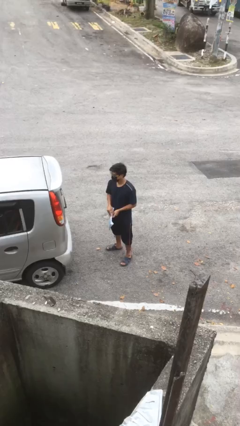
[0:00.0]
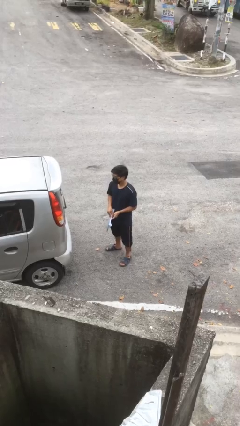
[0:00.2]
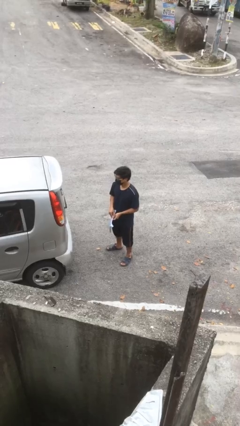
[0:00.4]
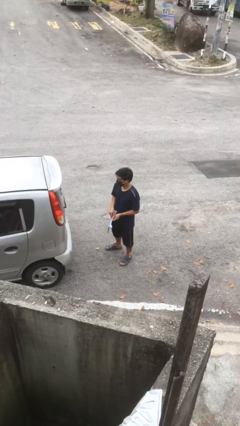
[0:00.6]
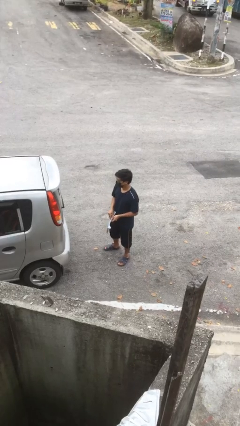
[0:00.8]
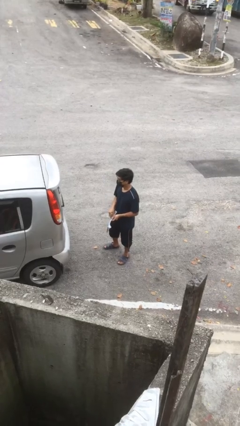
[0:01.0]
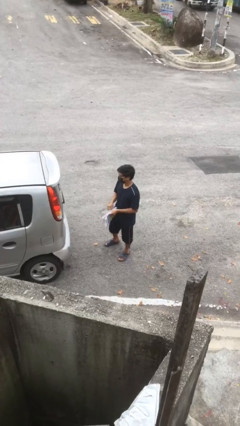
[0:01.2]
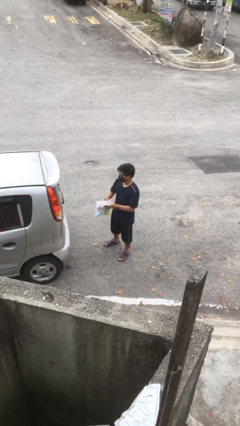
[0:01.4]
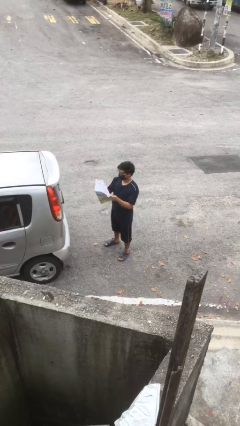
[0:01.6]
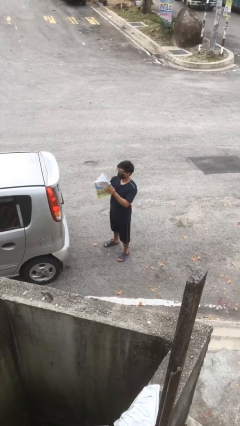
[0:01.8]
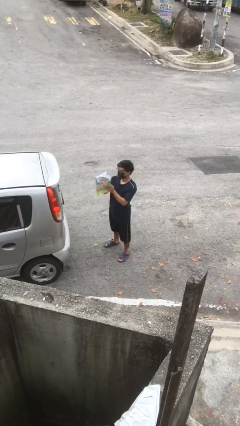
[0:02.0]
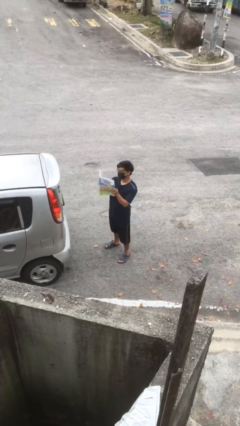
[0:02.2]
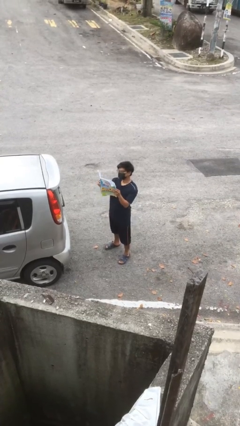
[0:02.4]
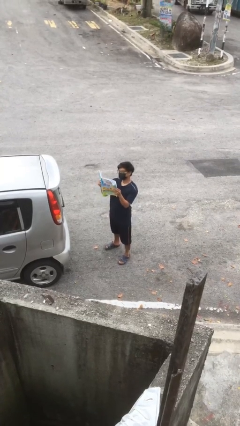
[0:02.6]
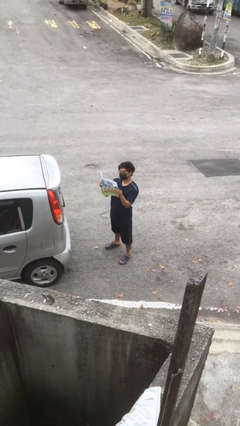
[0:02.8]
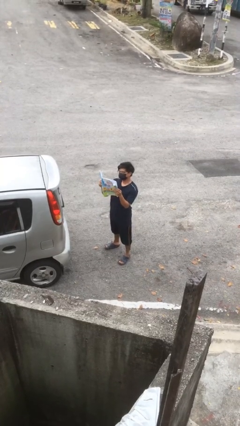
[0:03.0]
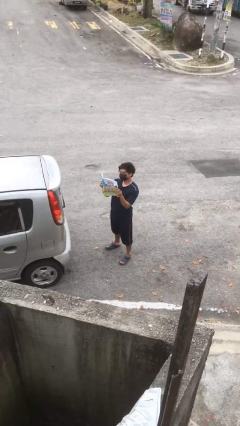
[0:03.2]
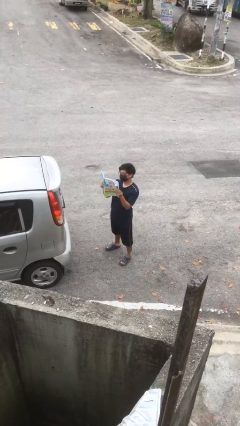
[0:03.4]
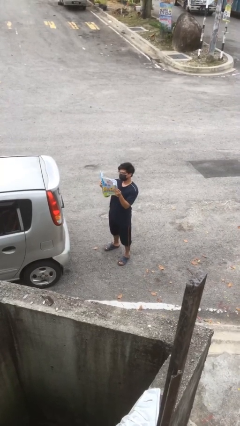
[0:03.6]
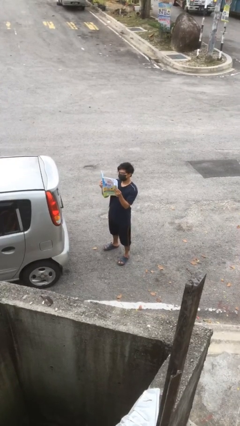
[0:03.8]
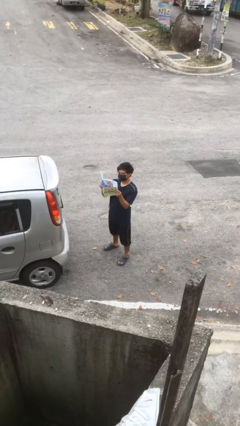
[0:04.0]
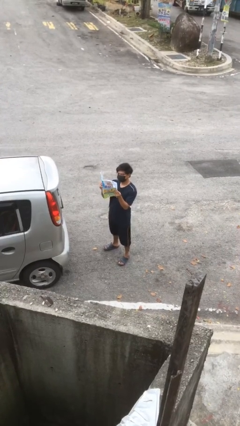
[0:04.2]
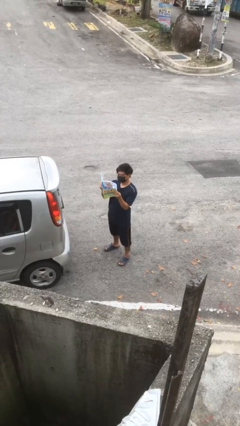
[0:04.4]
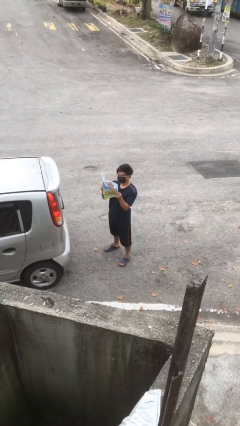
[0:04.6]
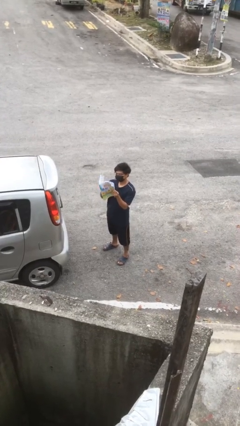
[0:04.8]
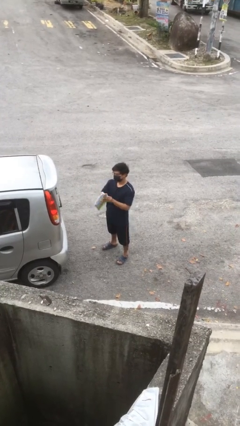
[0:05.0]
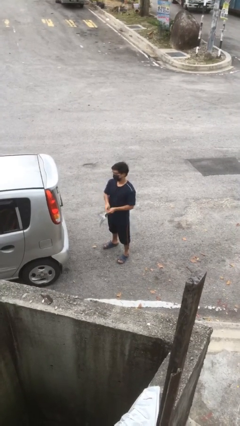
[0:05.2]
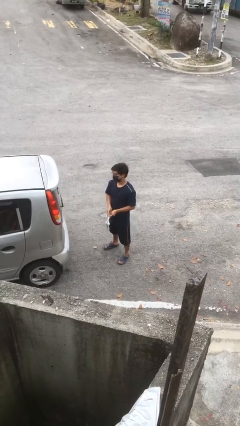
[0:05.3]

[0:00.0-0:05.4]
person reads document

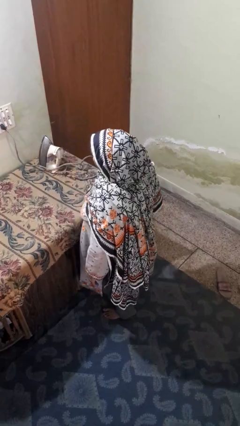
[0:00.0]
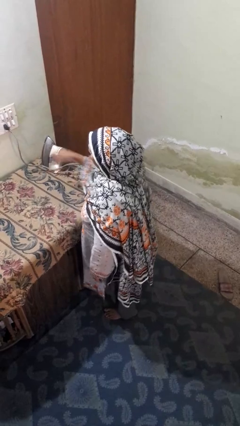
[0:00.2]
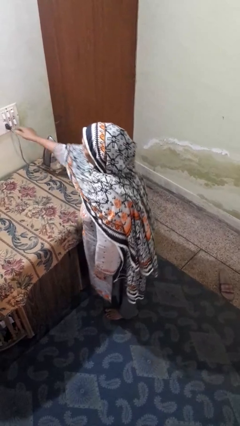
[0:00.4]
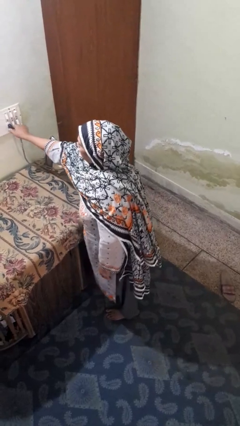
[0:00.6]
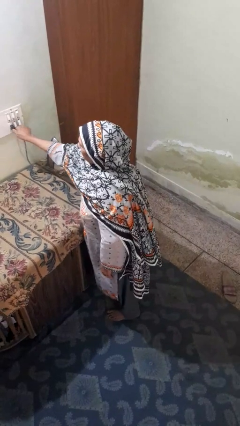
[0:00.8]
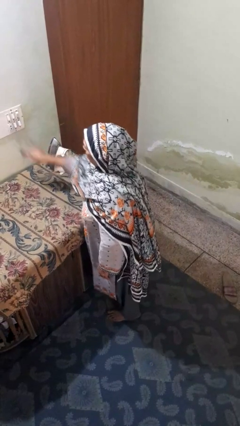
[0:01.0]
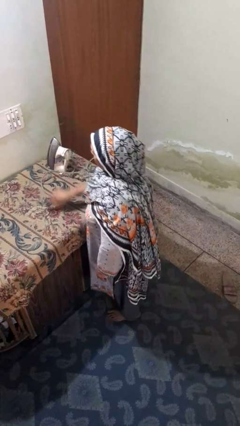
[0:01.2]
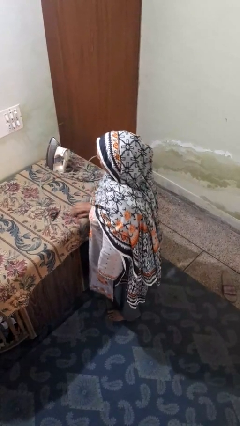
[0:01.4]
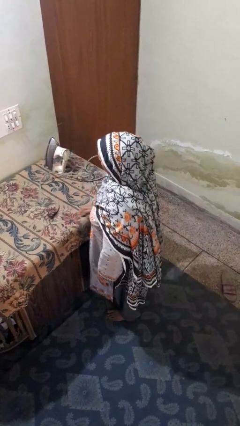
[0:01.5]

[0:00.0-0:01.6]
person unplugs from electrical socket

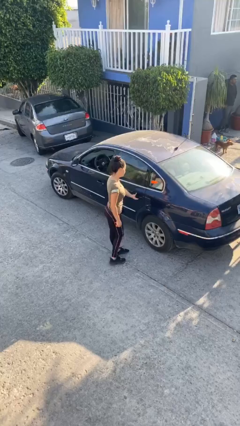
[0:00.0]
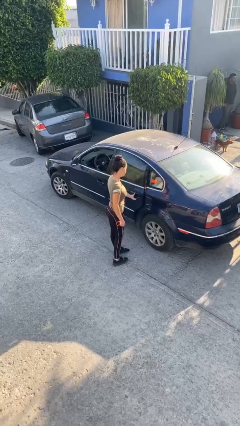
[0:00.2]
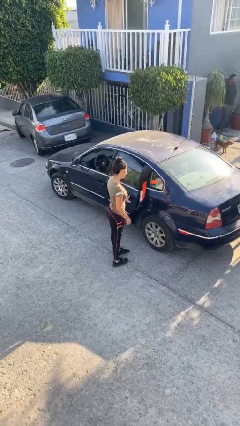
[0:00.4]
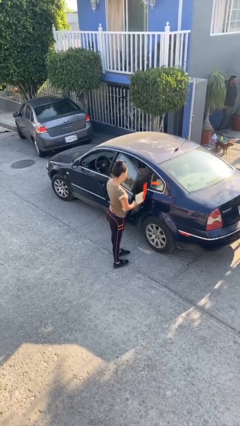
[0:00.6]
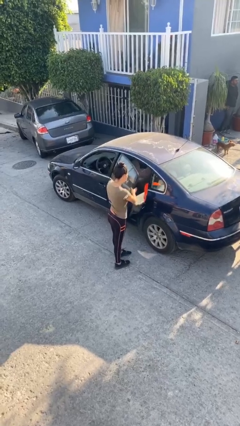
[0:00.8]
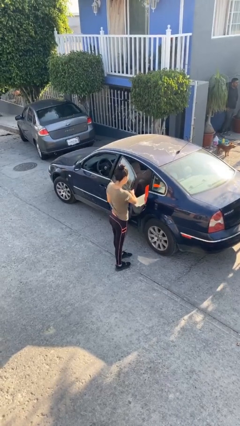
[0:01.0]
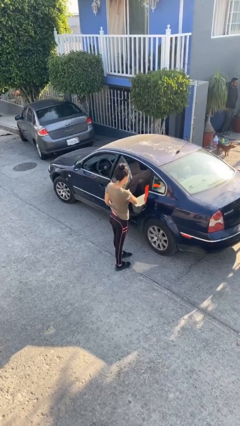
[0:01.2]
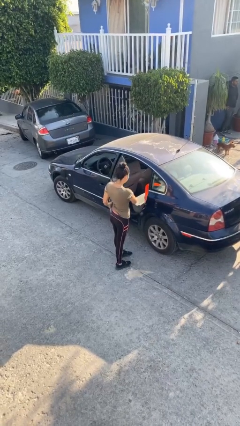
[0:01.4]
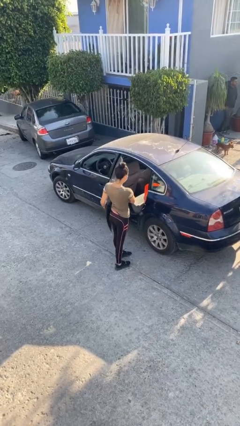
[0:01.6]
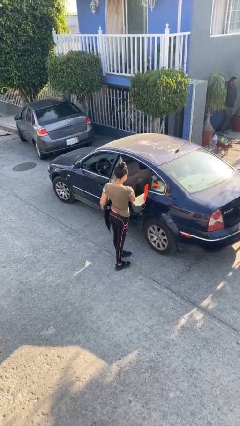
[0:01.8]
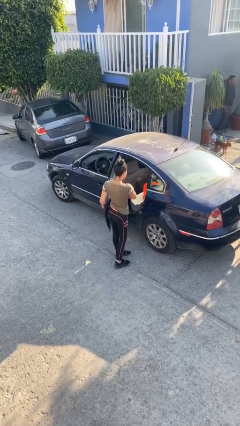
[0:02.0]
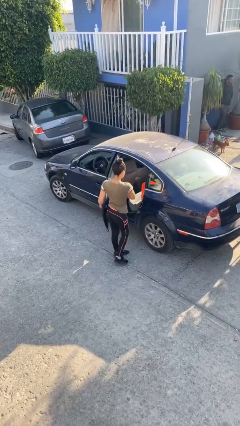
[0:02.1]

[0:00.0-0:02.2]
person opens car door

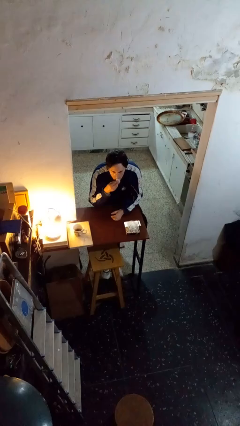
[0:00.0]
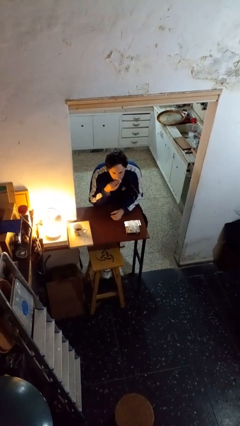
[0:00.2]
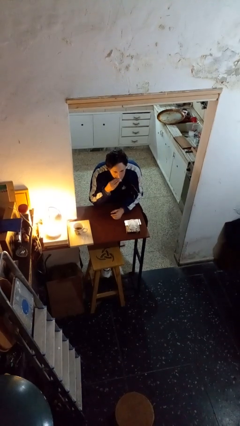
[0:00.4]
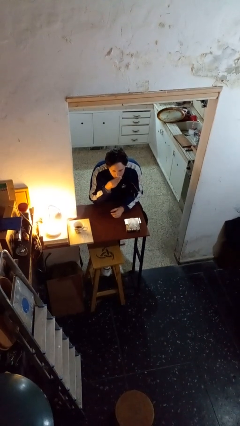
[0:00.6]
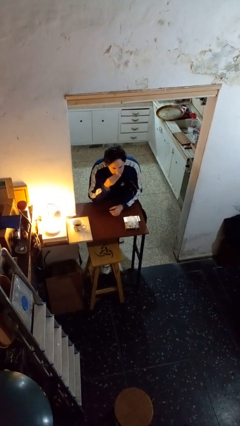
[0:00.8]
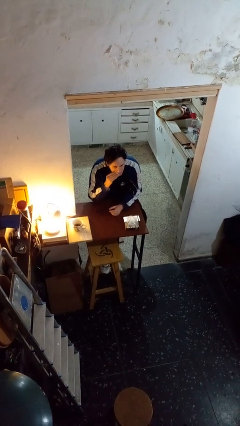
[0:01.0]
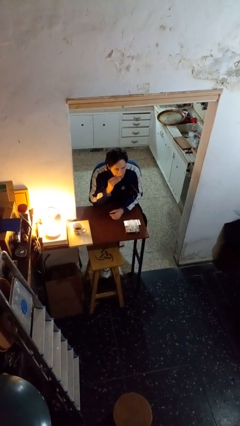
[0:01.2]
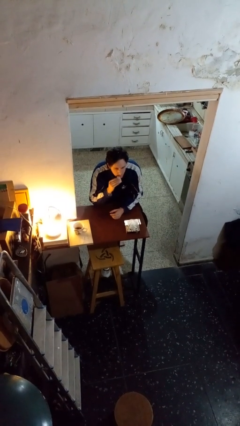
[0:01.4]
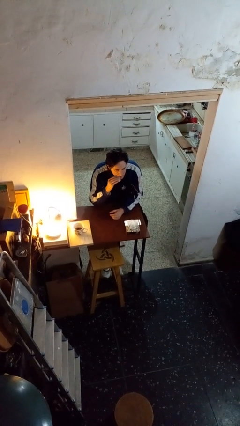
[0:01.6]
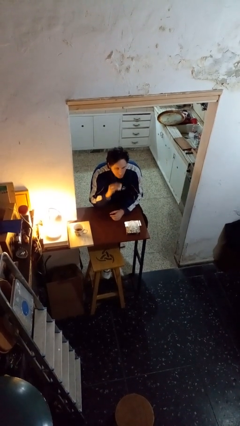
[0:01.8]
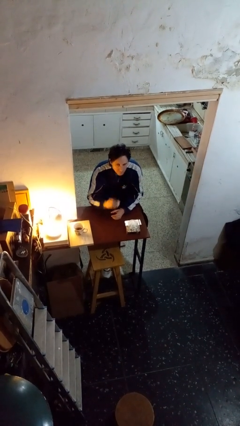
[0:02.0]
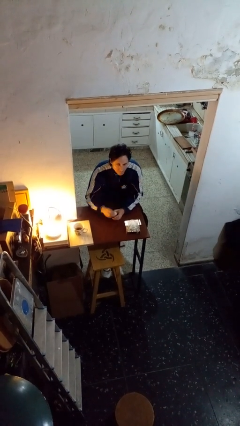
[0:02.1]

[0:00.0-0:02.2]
person wipes mouth with napkin

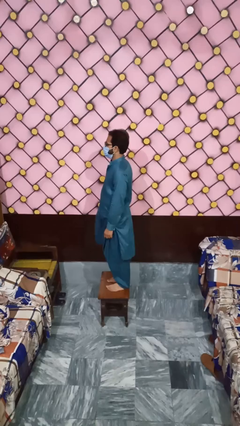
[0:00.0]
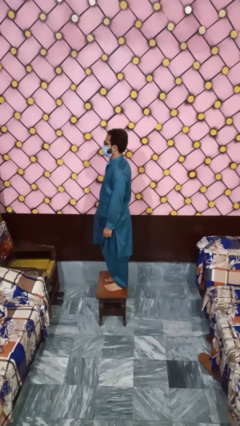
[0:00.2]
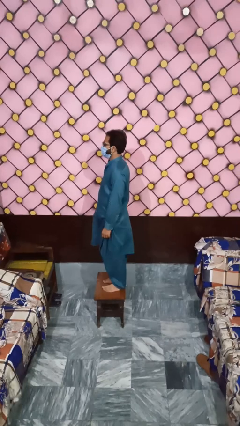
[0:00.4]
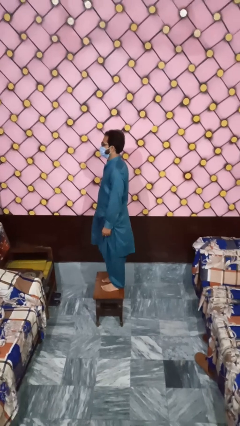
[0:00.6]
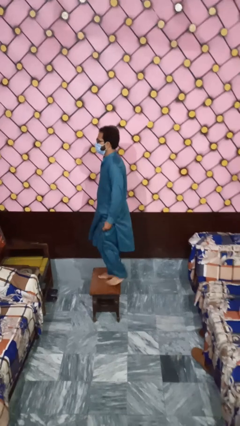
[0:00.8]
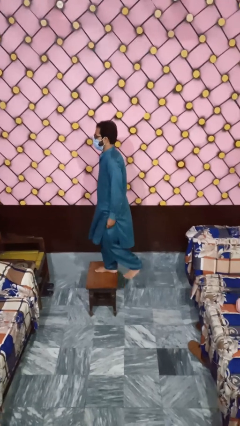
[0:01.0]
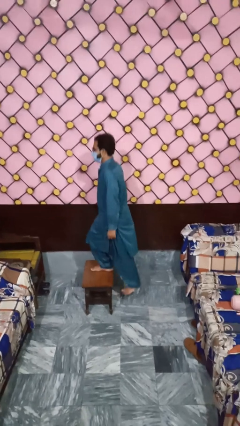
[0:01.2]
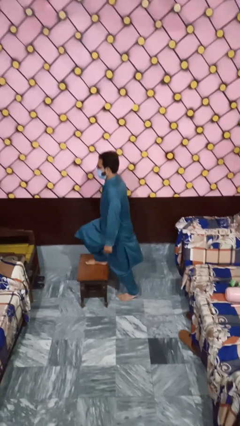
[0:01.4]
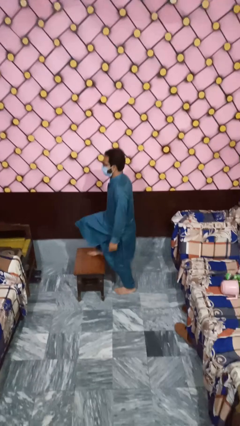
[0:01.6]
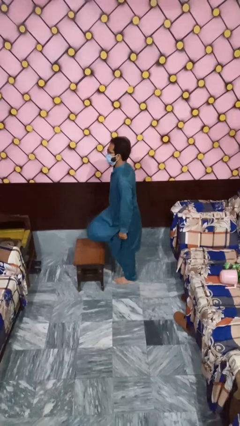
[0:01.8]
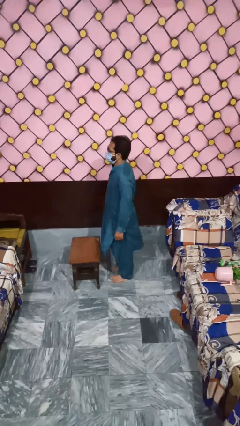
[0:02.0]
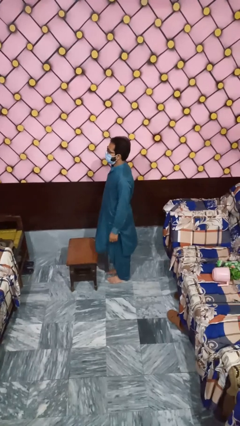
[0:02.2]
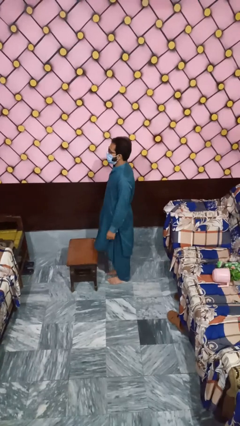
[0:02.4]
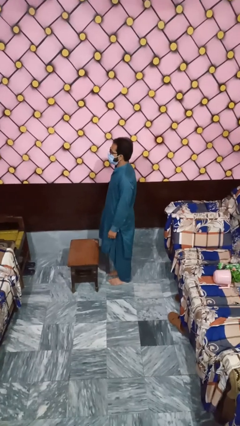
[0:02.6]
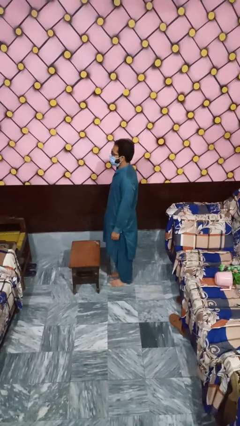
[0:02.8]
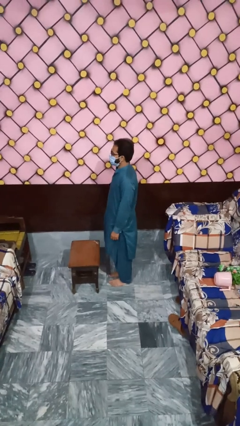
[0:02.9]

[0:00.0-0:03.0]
person climbs off table

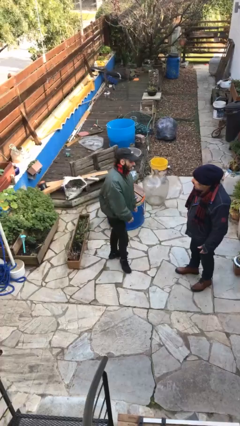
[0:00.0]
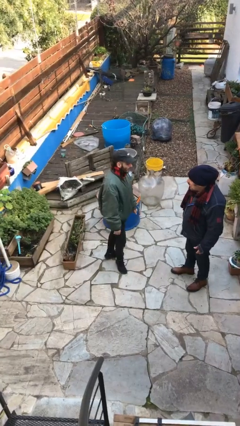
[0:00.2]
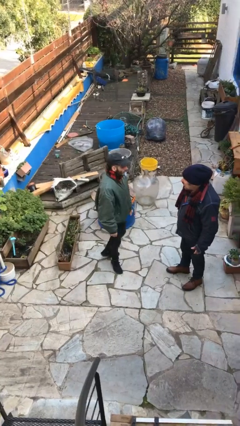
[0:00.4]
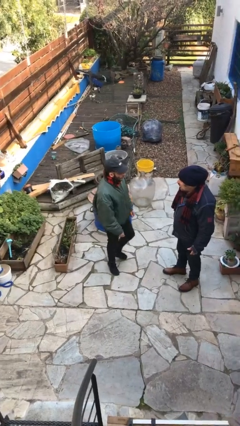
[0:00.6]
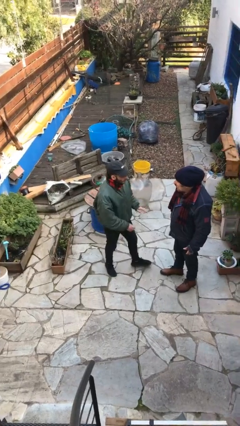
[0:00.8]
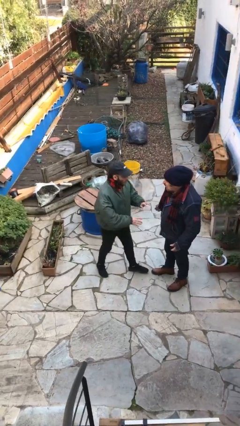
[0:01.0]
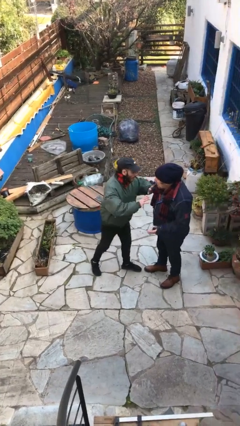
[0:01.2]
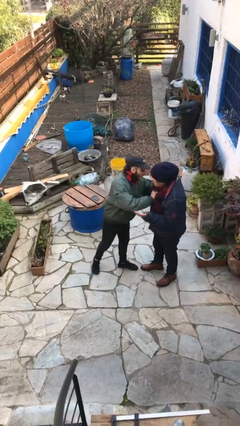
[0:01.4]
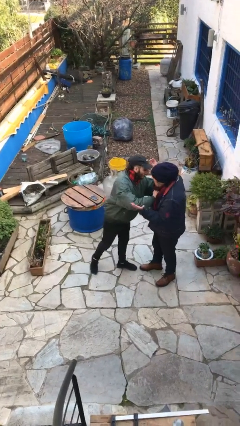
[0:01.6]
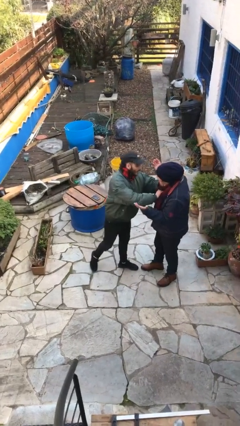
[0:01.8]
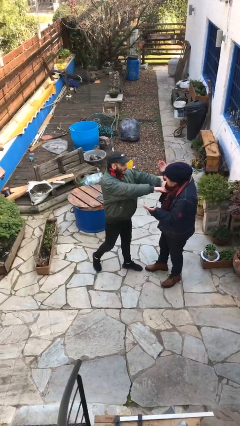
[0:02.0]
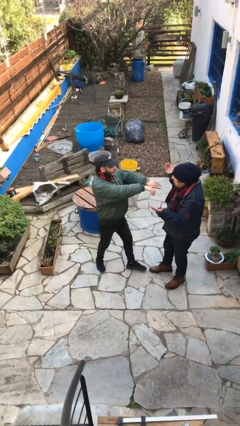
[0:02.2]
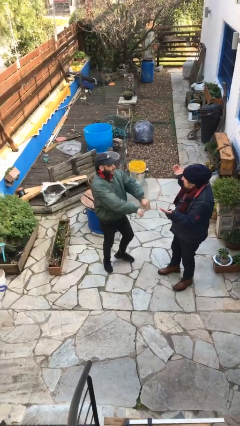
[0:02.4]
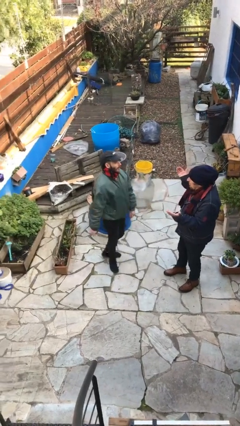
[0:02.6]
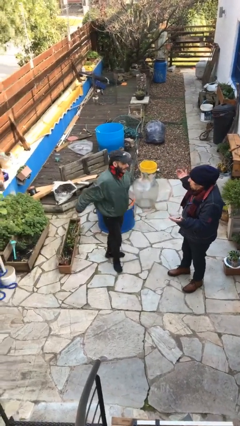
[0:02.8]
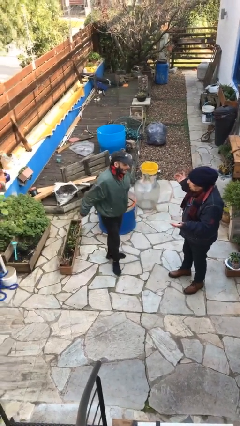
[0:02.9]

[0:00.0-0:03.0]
person shoves person

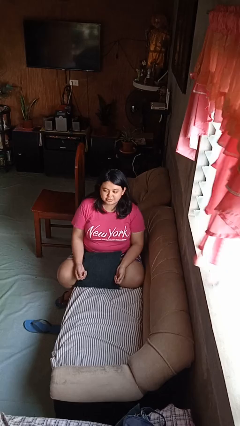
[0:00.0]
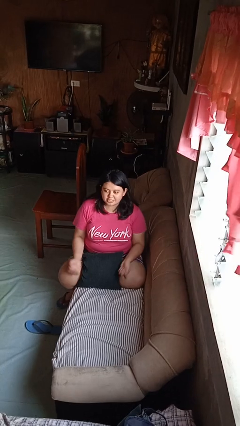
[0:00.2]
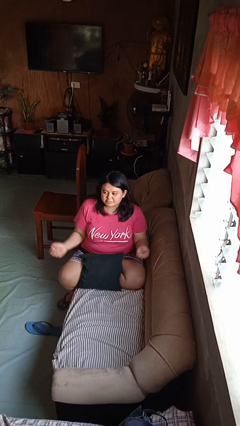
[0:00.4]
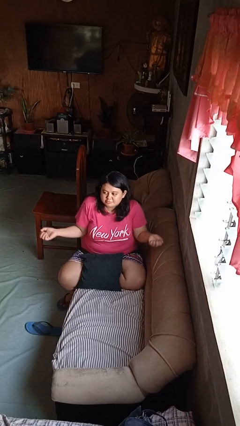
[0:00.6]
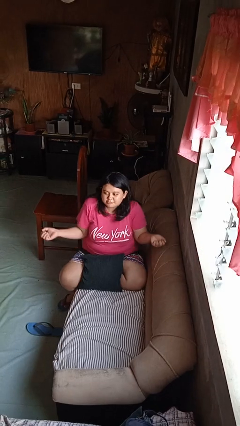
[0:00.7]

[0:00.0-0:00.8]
person shrugs
